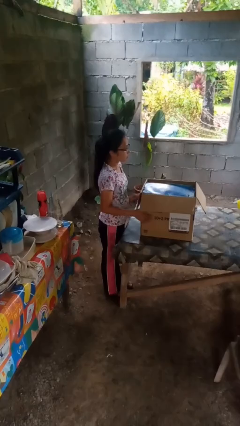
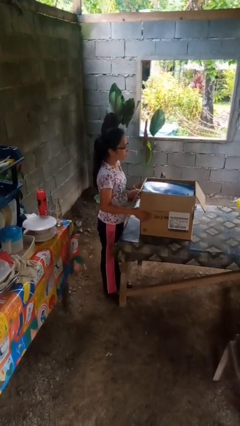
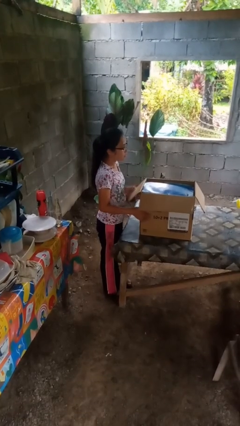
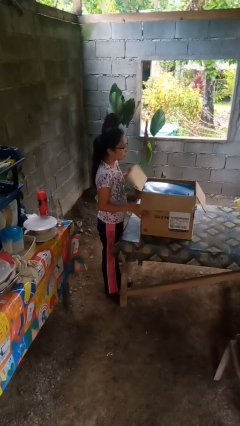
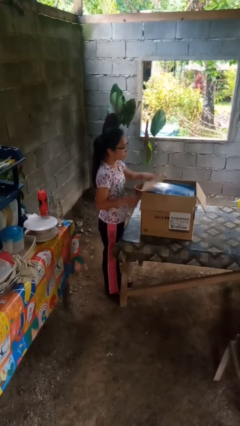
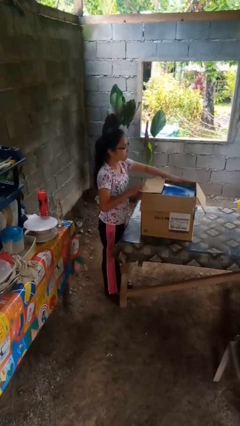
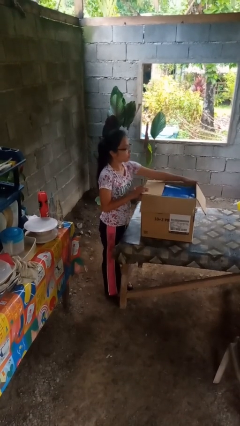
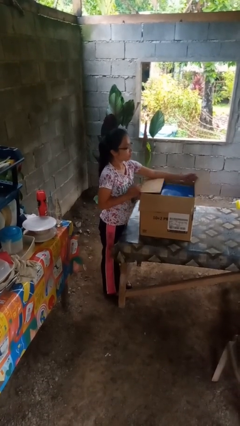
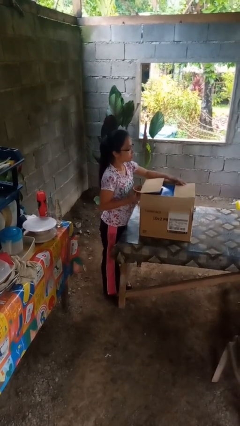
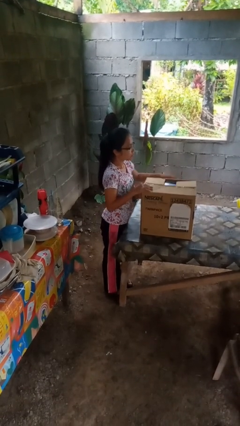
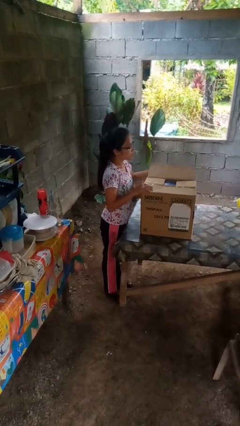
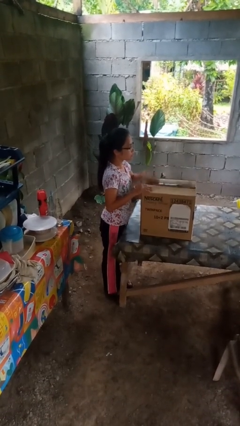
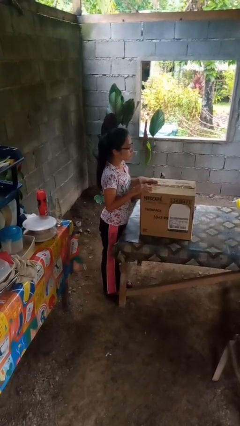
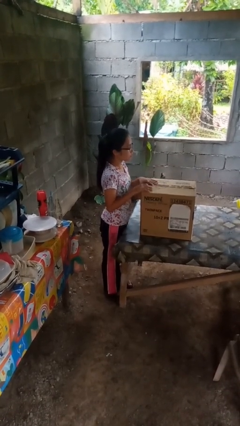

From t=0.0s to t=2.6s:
person closes box

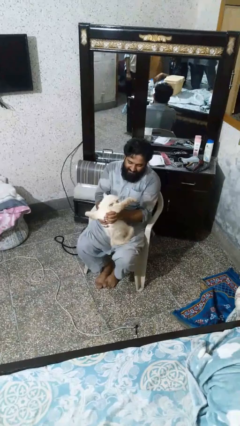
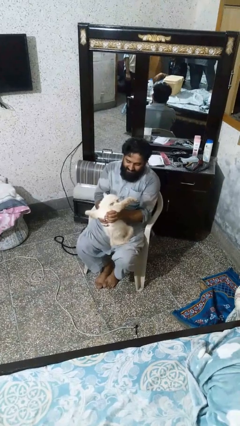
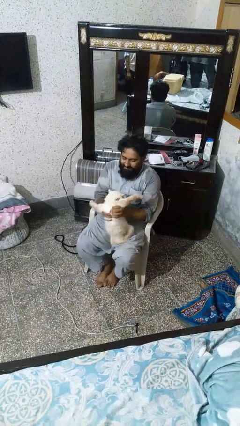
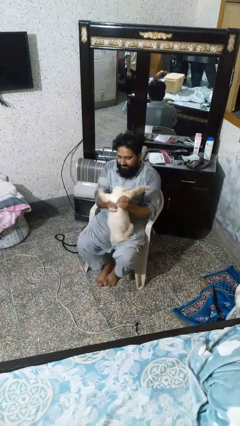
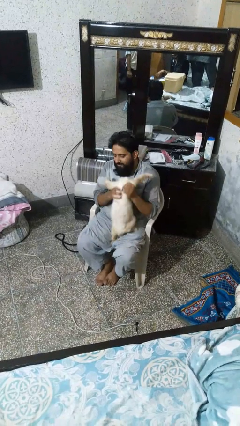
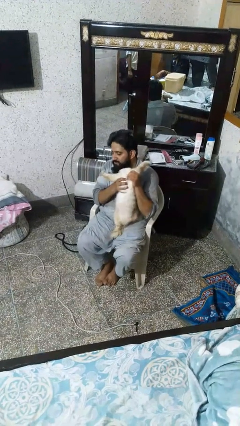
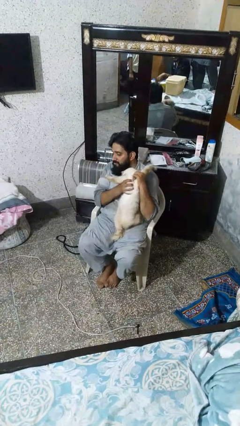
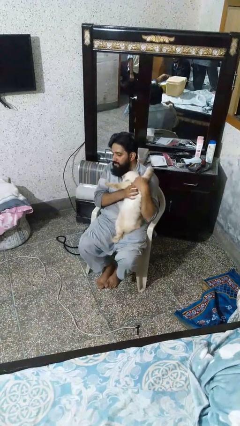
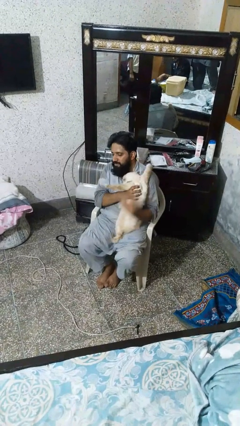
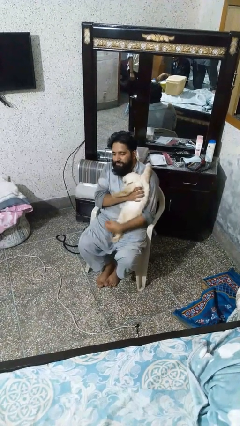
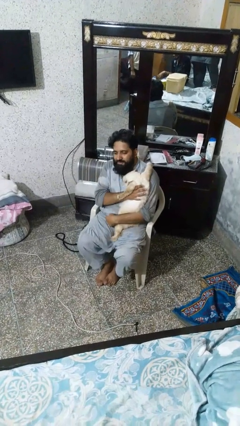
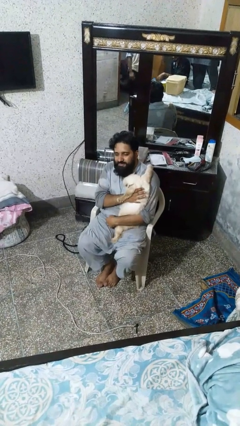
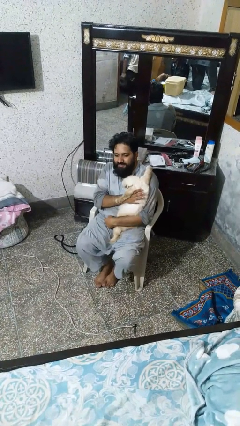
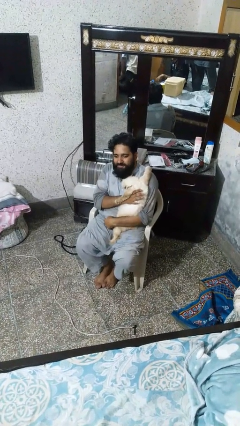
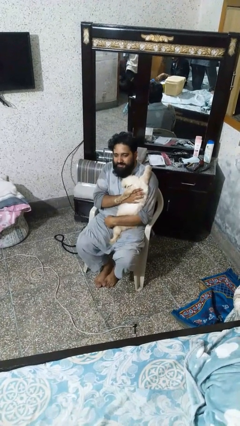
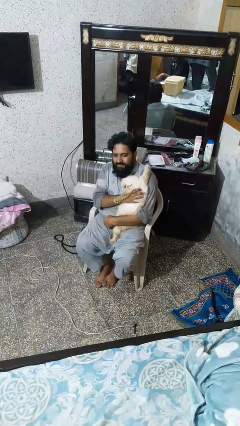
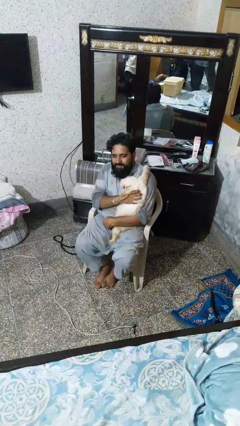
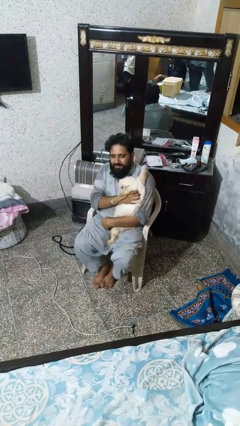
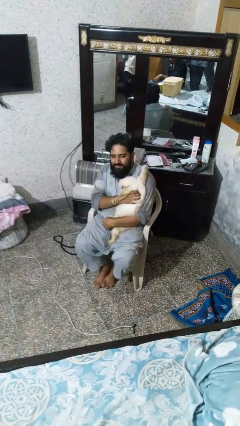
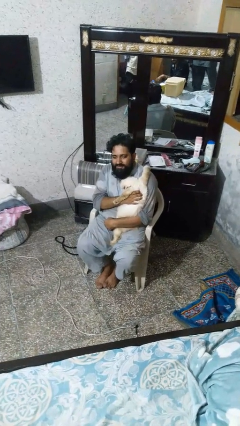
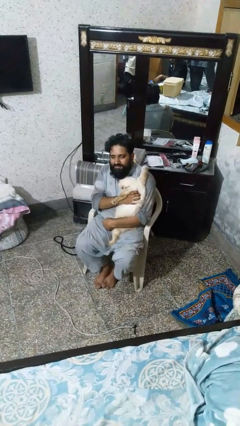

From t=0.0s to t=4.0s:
person hugs cat

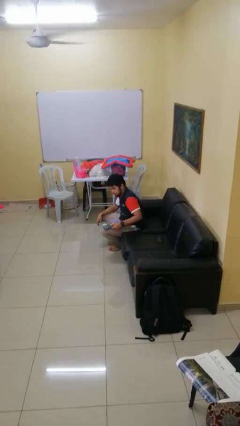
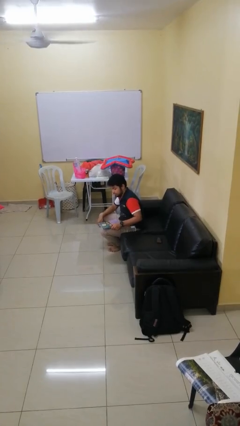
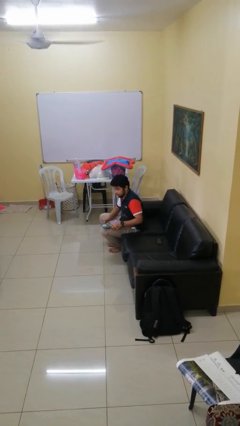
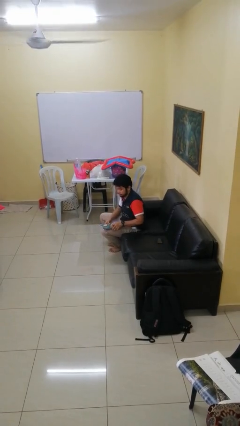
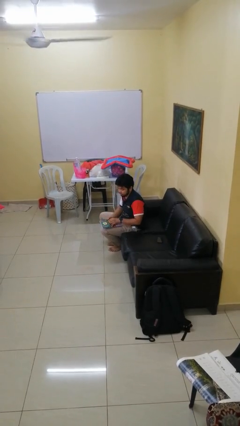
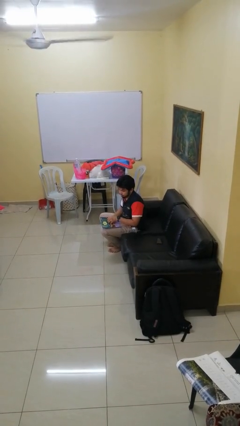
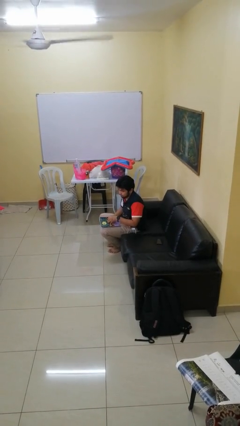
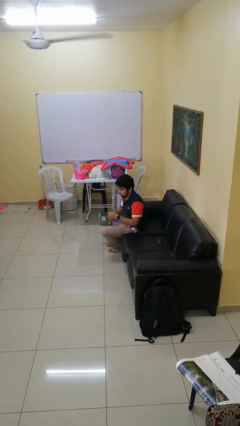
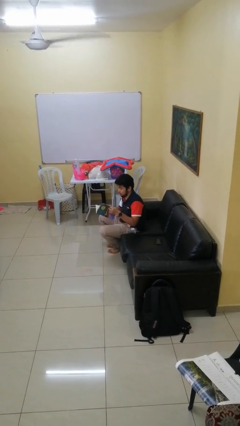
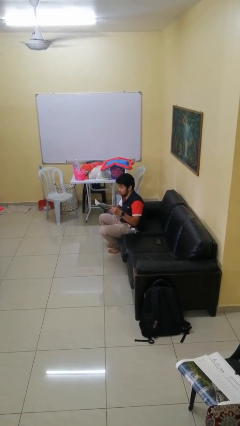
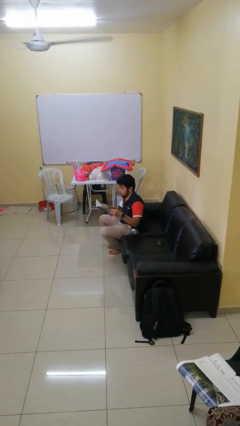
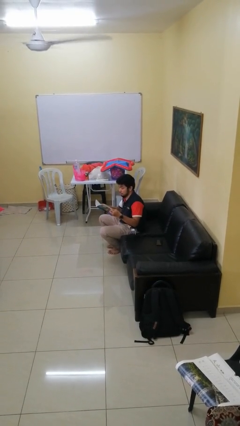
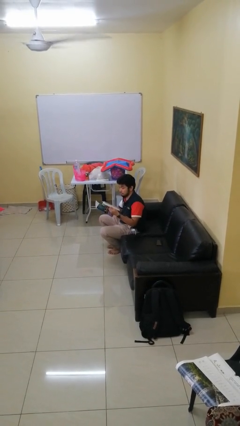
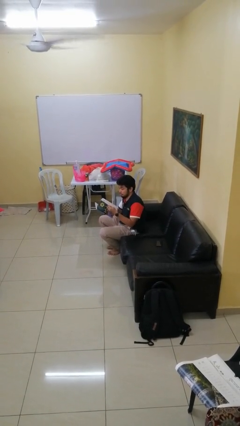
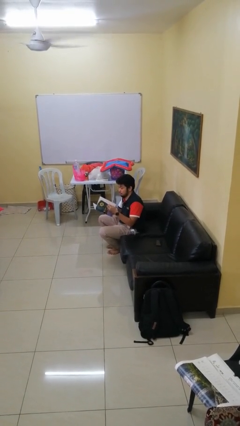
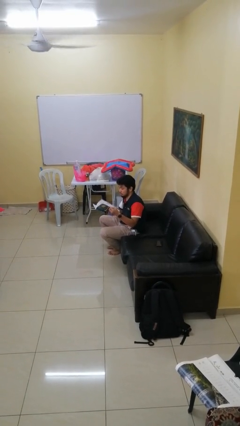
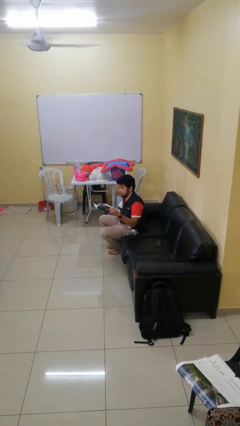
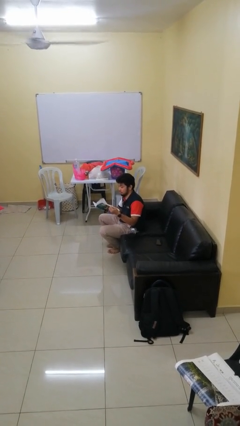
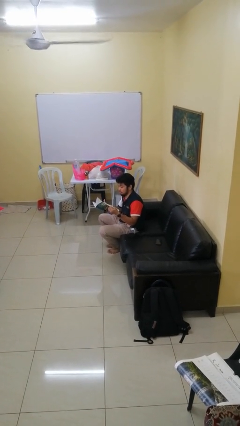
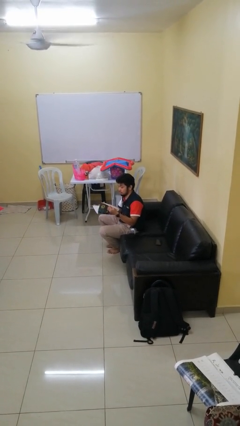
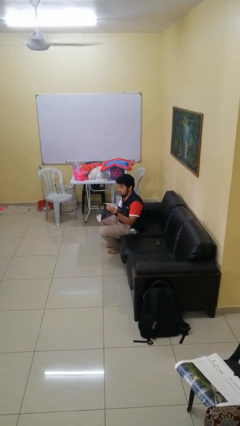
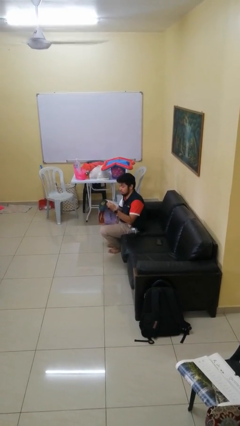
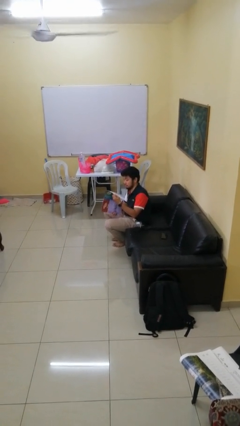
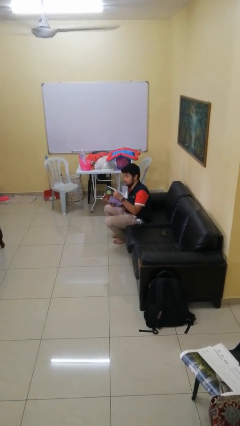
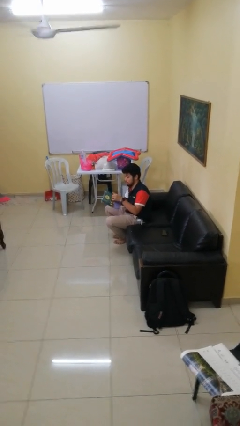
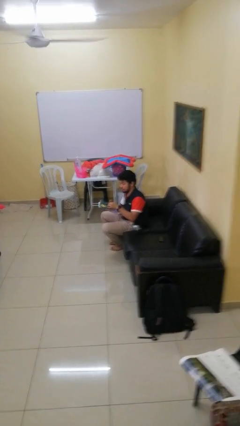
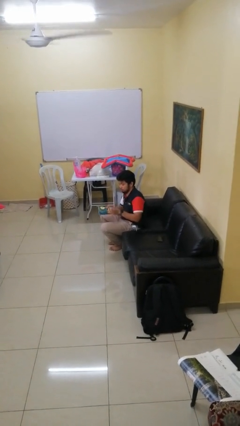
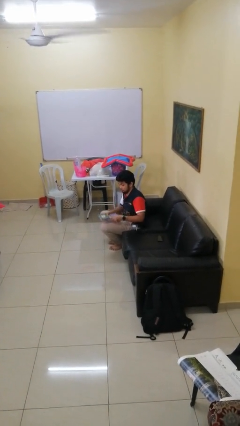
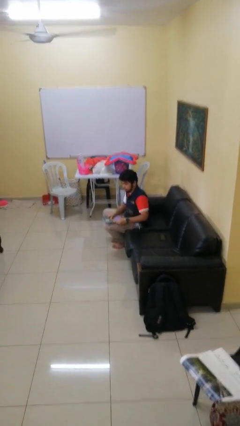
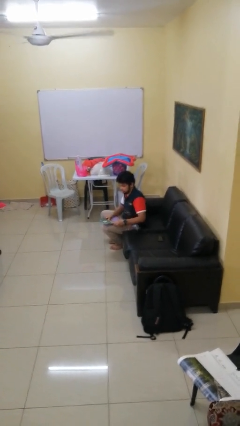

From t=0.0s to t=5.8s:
person reads magazine

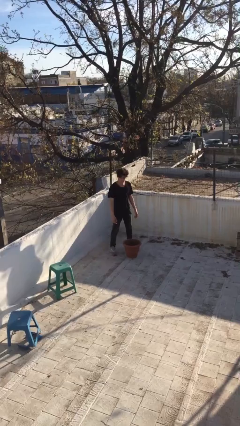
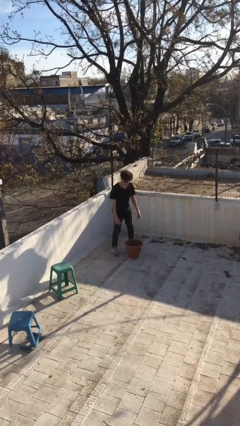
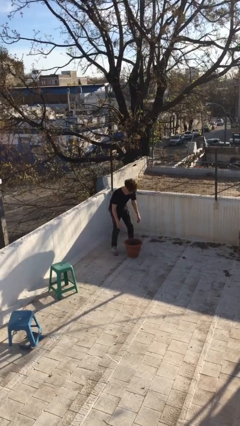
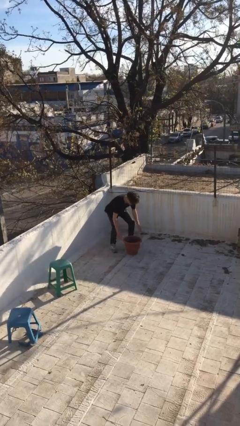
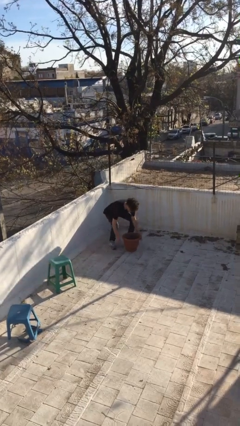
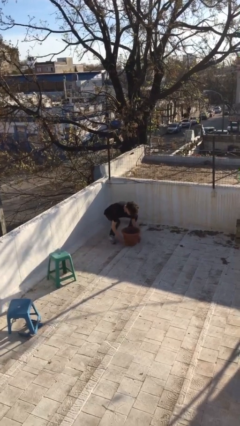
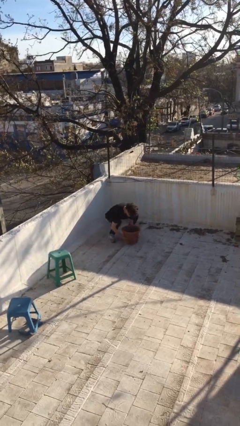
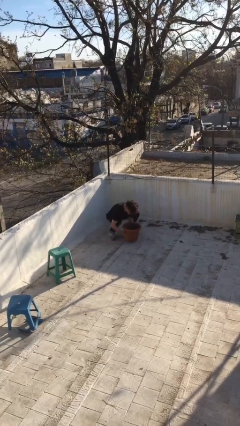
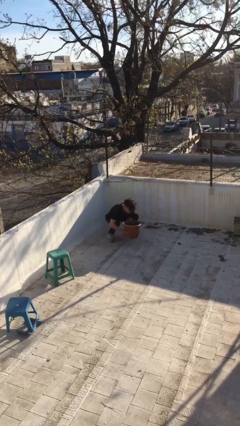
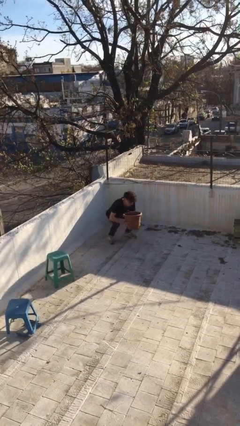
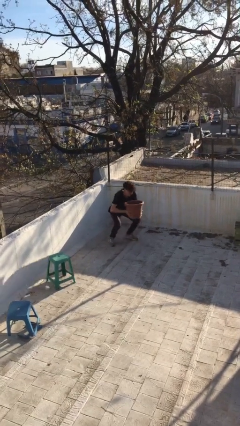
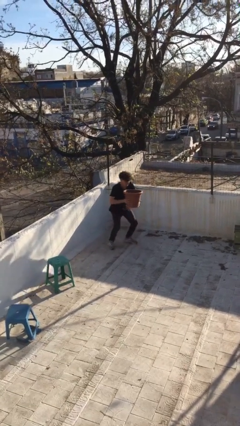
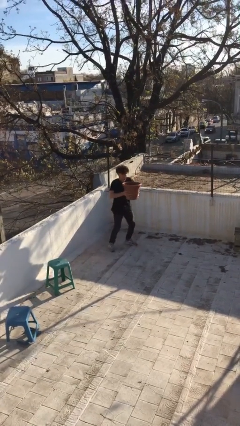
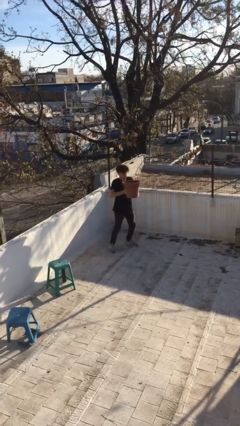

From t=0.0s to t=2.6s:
person picks up object from floor

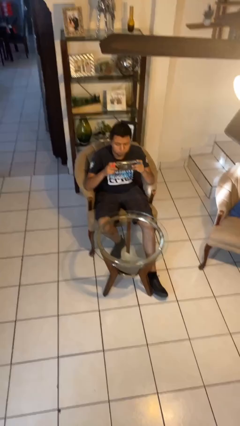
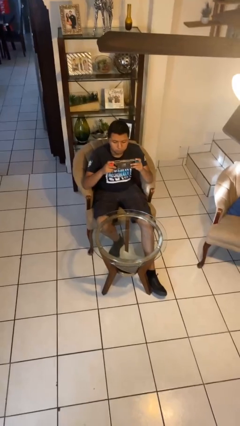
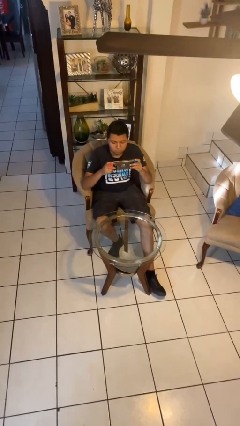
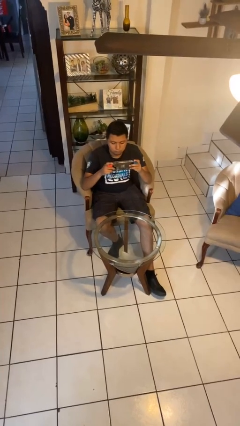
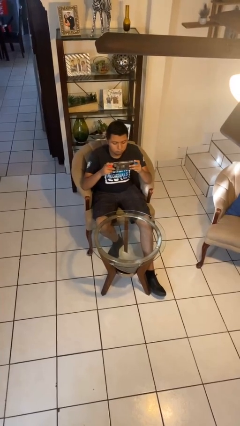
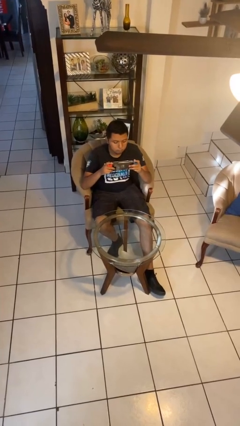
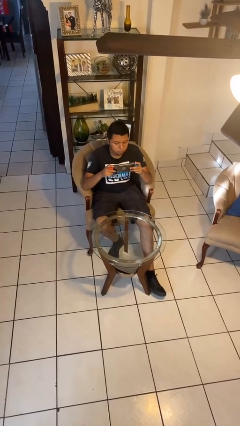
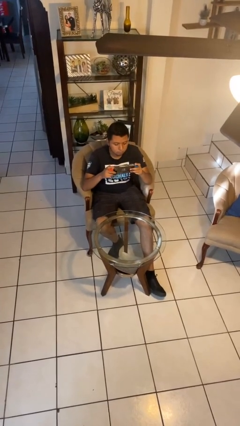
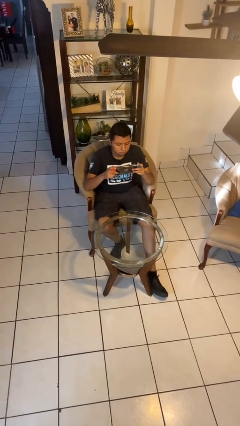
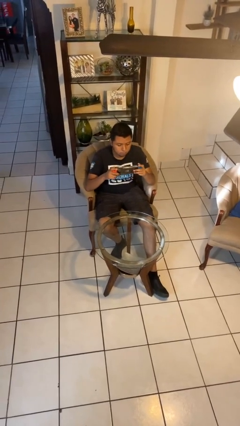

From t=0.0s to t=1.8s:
person interacts with handheld game

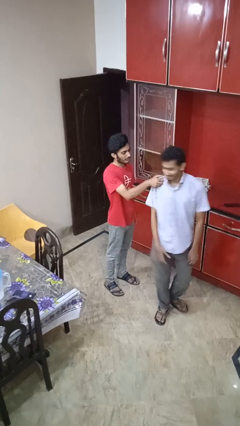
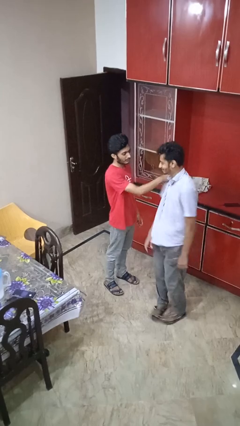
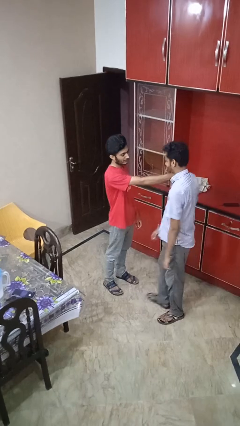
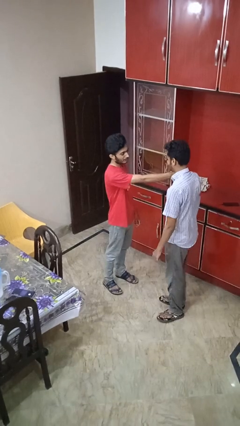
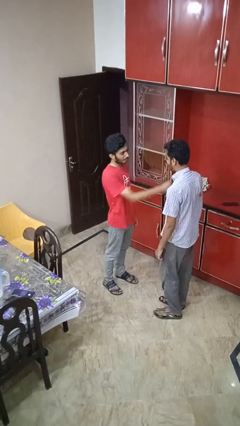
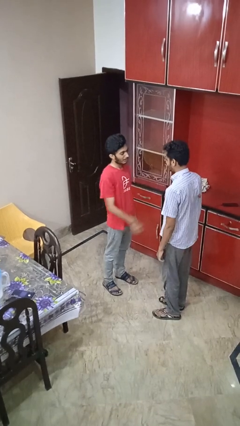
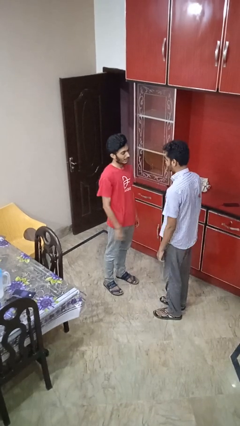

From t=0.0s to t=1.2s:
person spins person around
